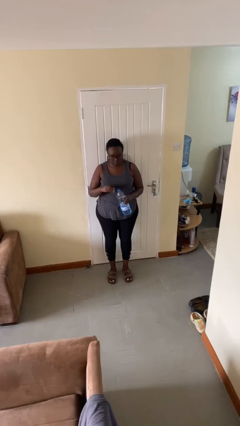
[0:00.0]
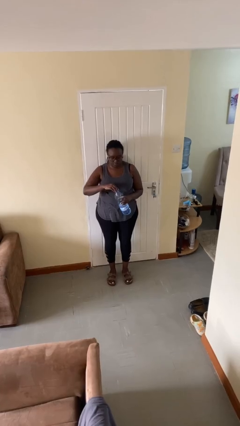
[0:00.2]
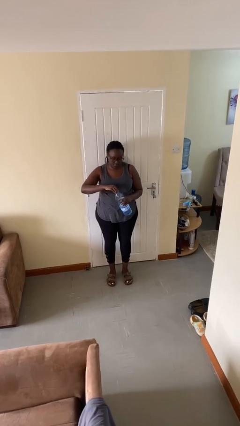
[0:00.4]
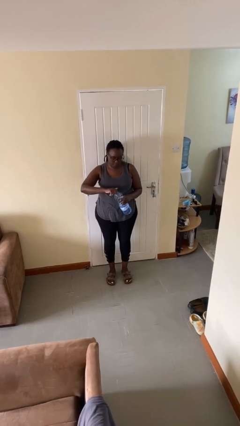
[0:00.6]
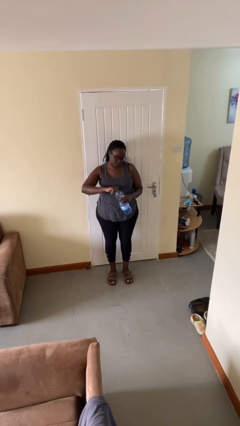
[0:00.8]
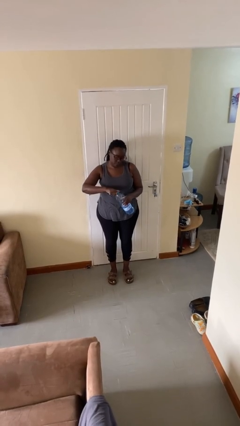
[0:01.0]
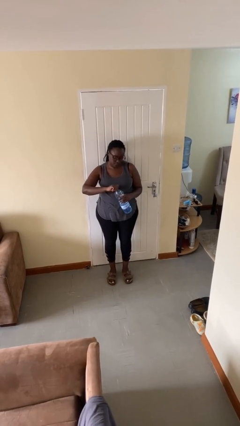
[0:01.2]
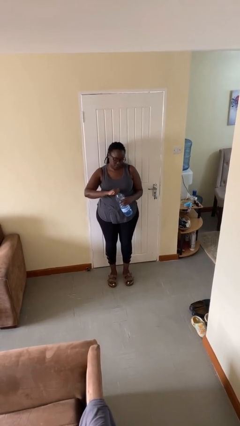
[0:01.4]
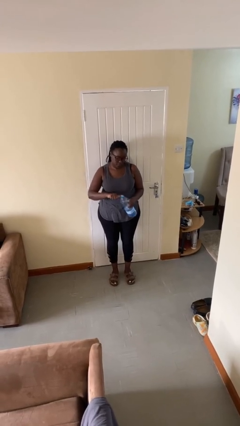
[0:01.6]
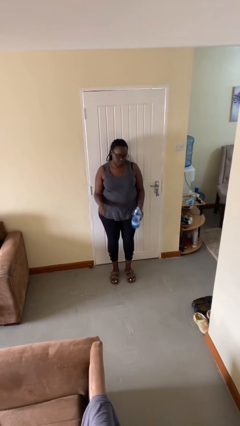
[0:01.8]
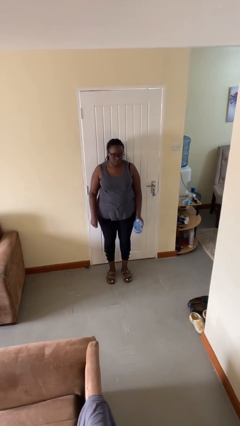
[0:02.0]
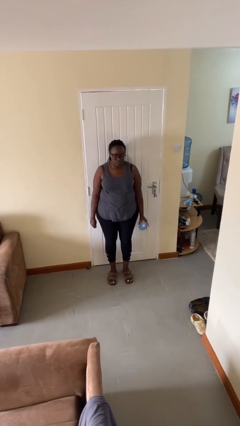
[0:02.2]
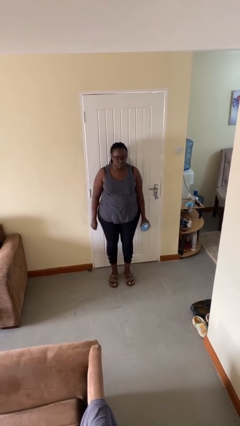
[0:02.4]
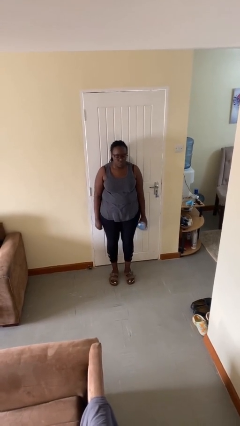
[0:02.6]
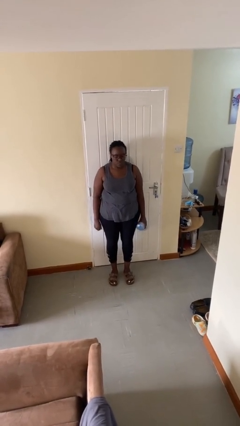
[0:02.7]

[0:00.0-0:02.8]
person screws lid to bottle

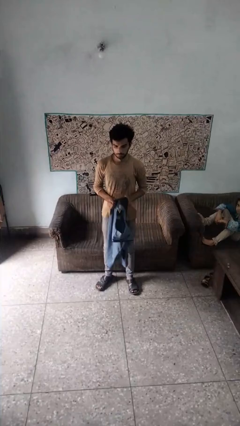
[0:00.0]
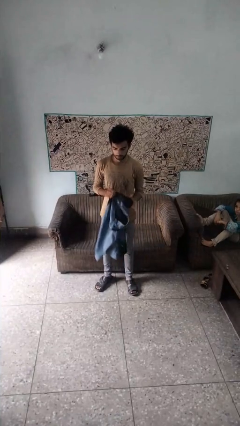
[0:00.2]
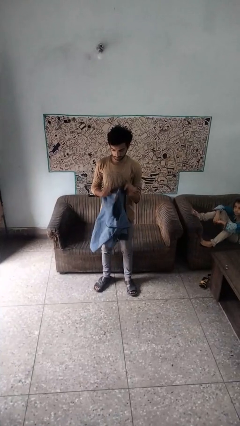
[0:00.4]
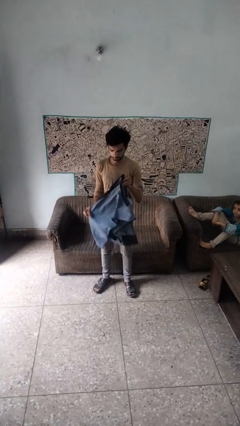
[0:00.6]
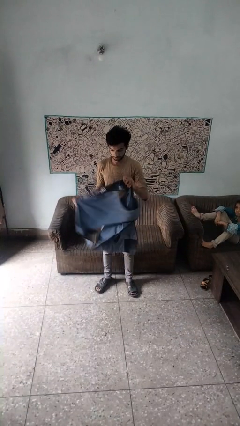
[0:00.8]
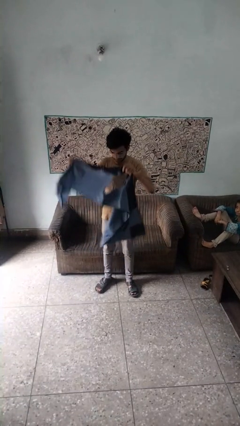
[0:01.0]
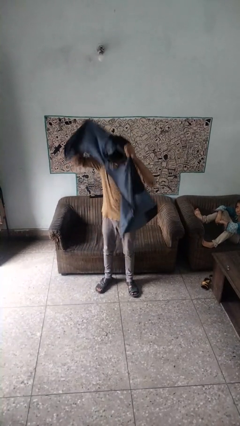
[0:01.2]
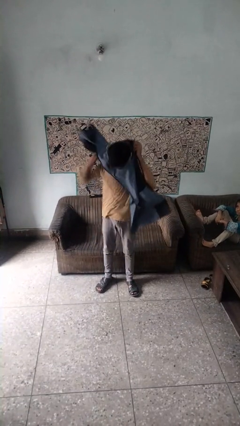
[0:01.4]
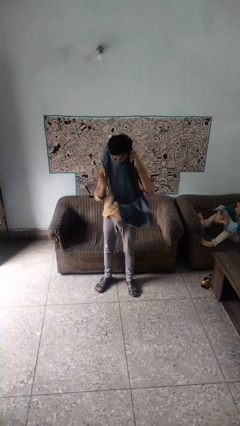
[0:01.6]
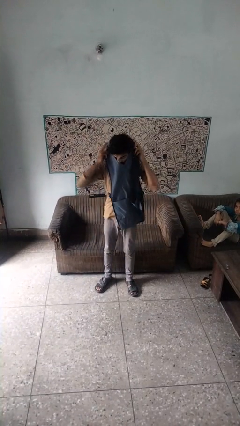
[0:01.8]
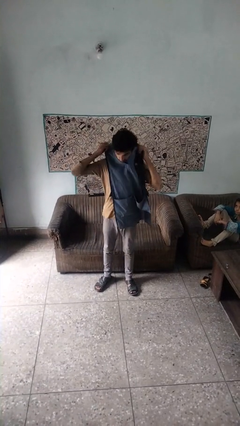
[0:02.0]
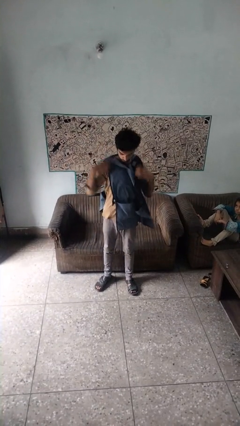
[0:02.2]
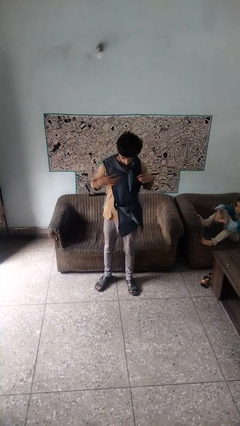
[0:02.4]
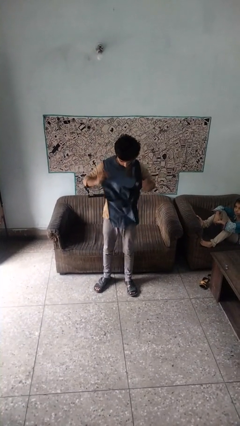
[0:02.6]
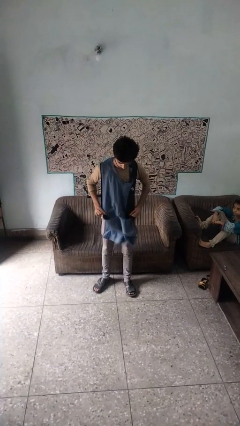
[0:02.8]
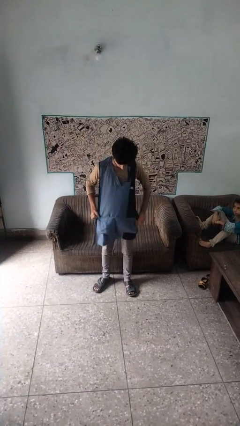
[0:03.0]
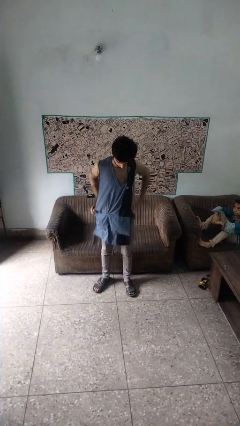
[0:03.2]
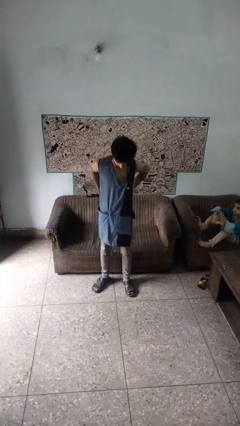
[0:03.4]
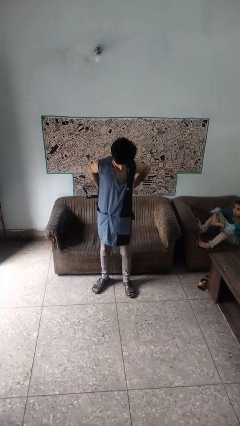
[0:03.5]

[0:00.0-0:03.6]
person puts on apron

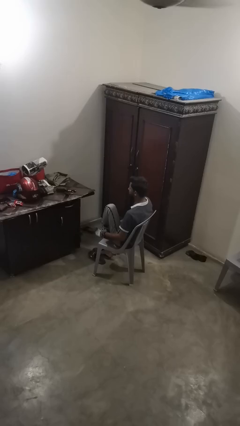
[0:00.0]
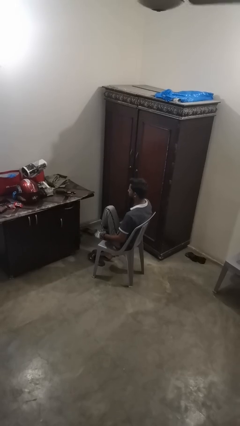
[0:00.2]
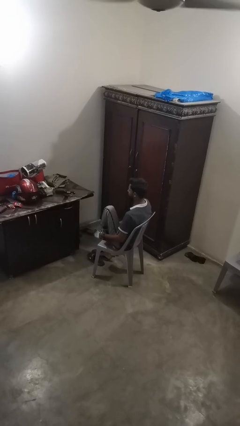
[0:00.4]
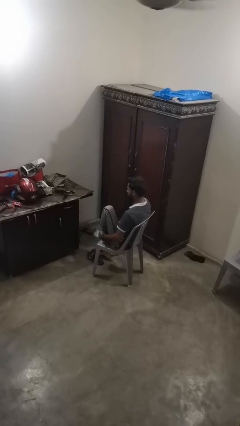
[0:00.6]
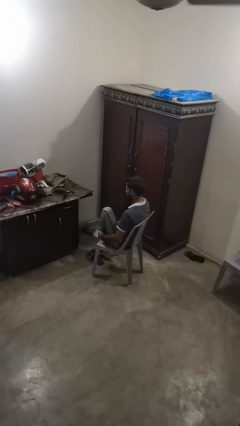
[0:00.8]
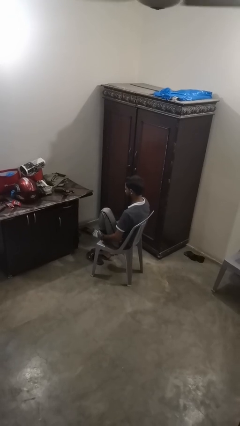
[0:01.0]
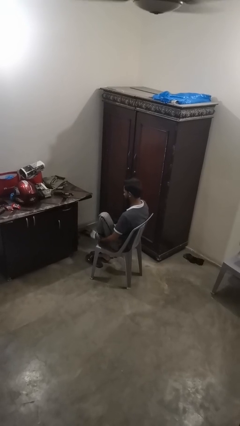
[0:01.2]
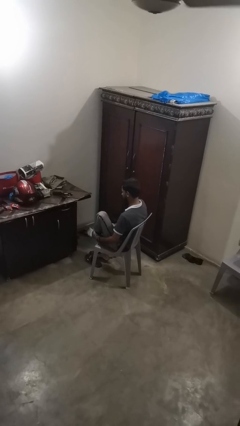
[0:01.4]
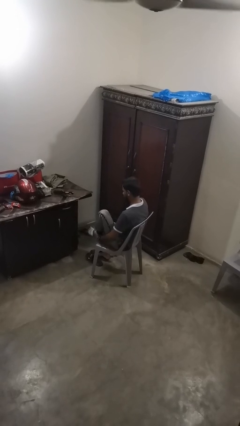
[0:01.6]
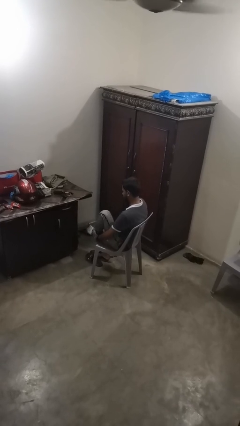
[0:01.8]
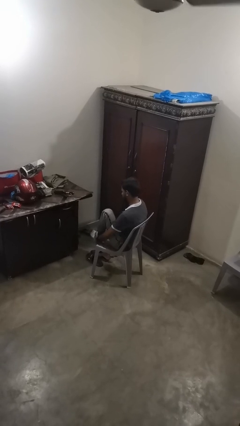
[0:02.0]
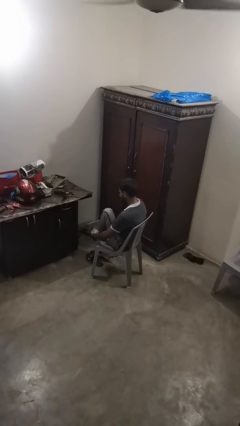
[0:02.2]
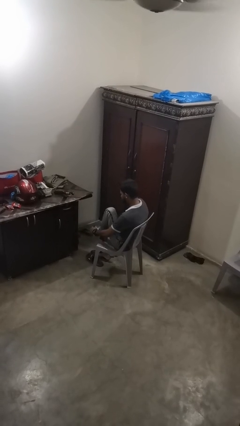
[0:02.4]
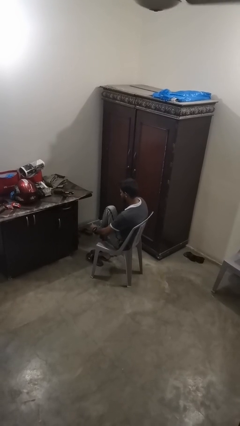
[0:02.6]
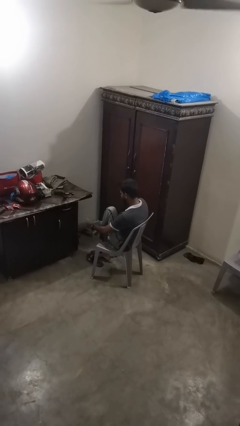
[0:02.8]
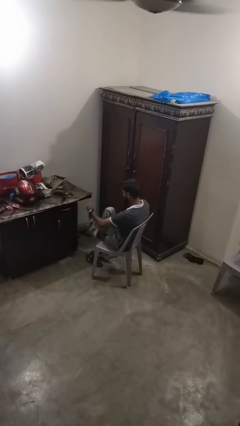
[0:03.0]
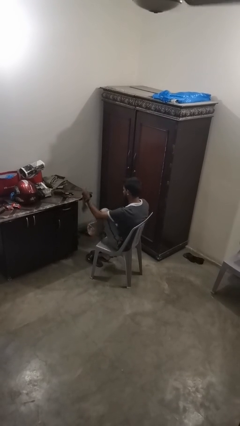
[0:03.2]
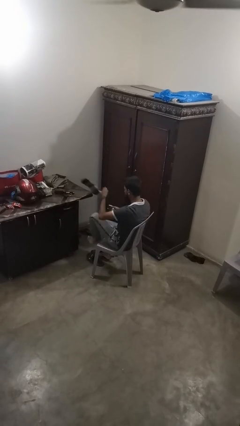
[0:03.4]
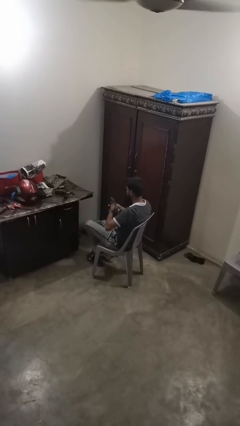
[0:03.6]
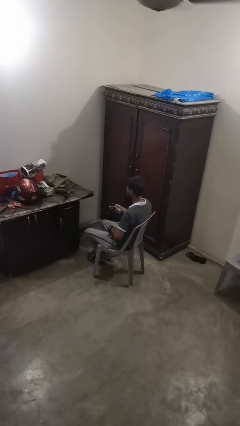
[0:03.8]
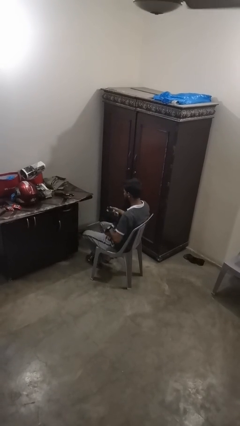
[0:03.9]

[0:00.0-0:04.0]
person takes off socks

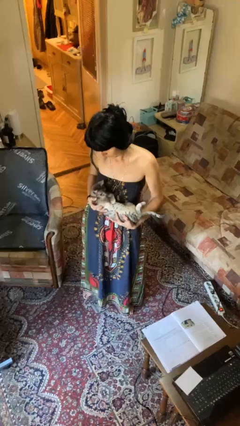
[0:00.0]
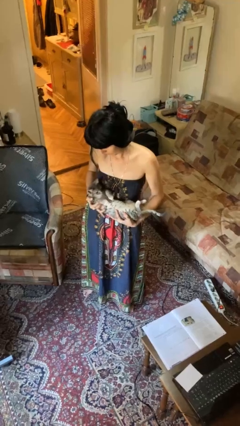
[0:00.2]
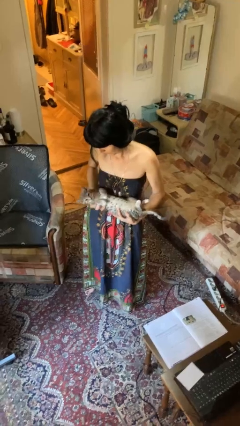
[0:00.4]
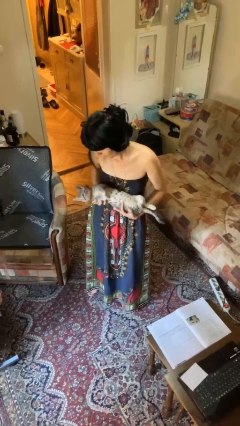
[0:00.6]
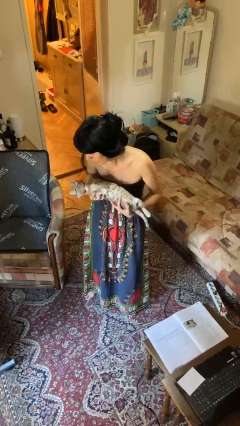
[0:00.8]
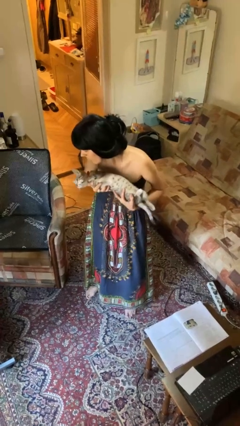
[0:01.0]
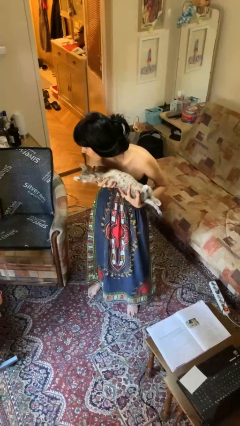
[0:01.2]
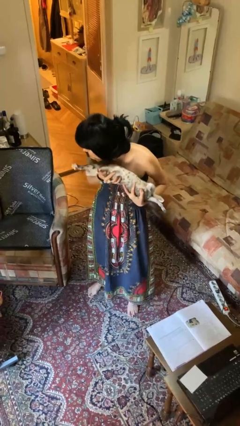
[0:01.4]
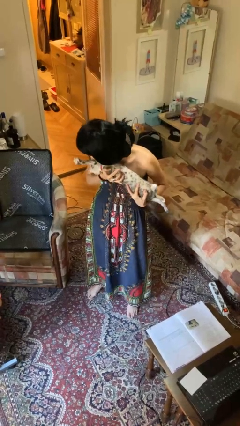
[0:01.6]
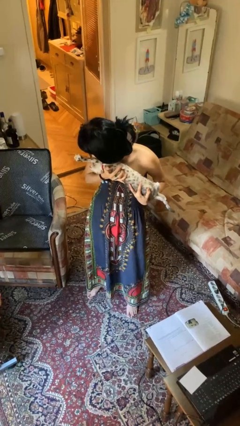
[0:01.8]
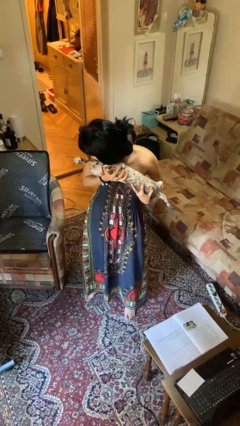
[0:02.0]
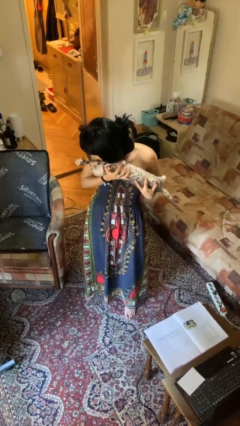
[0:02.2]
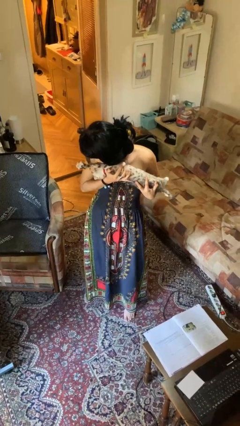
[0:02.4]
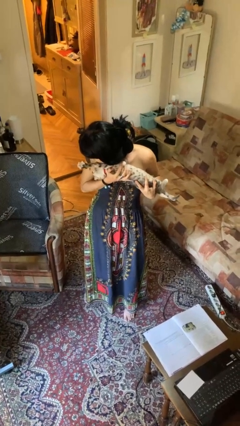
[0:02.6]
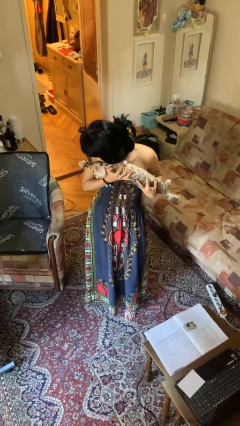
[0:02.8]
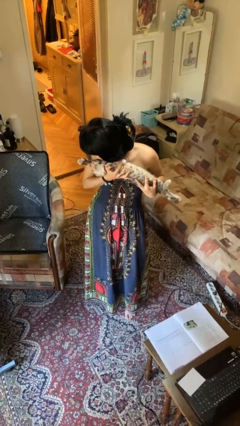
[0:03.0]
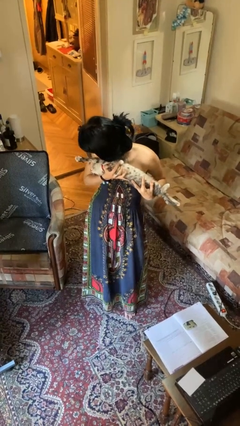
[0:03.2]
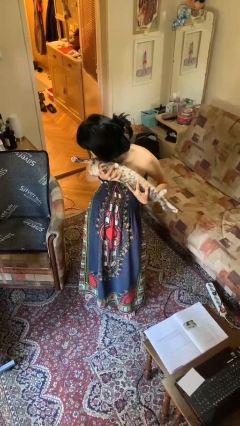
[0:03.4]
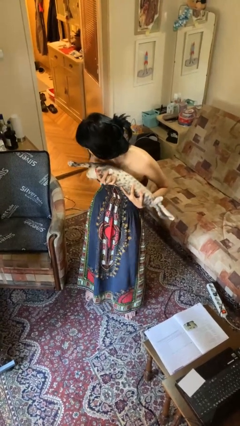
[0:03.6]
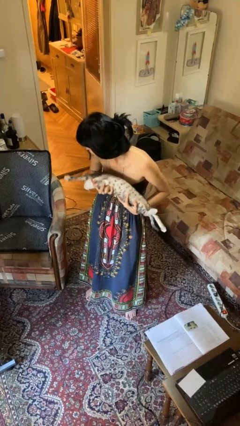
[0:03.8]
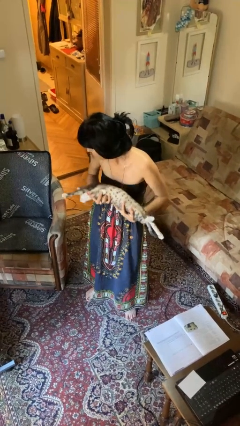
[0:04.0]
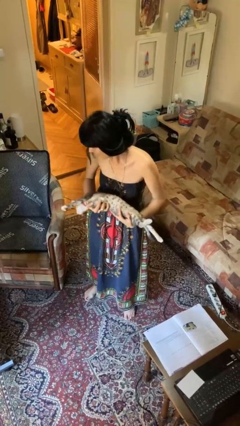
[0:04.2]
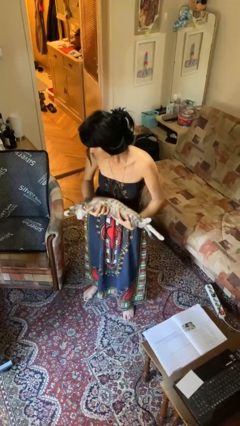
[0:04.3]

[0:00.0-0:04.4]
person hugs cat

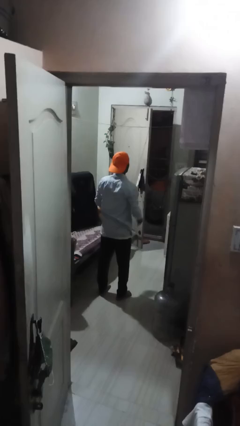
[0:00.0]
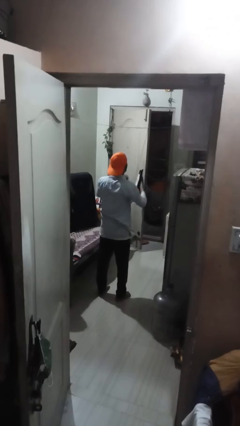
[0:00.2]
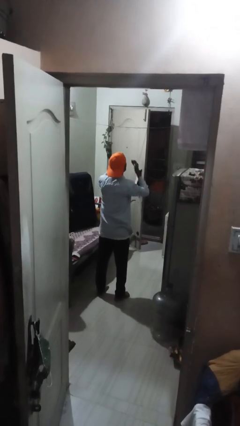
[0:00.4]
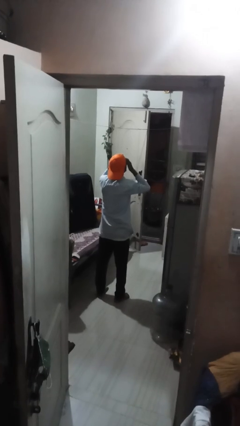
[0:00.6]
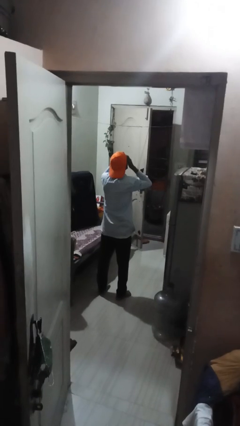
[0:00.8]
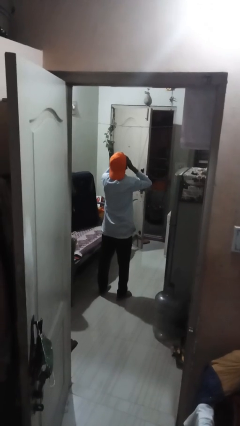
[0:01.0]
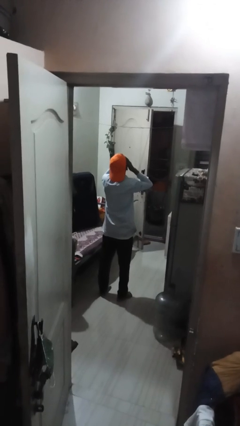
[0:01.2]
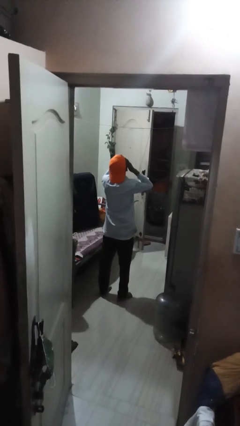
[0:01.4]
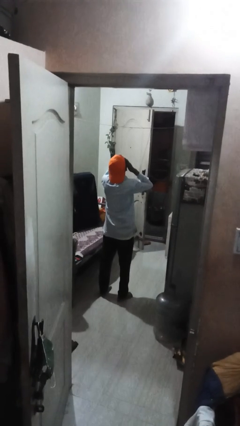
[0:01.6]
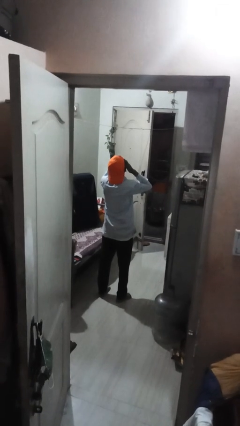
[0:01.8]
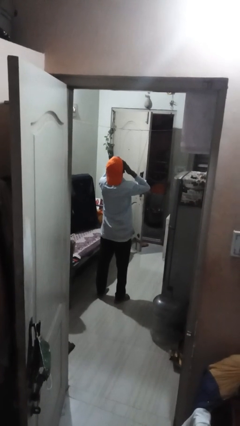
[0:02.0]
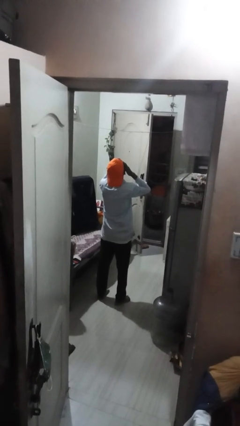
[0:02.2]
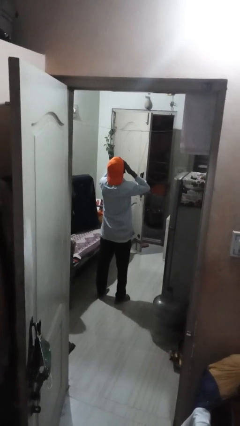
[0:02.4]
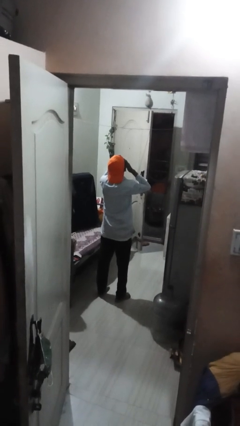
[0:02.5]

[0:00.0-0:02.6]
person covers face with hands

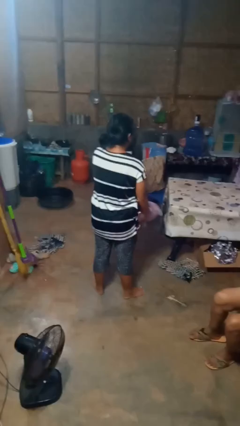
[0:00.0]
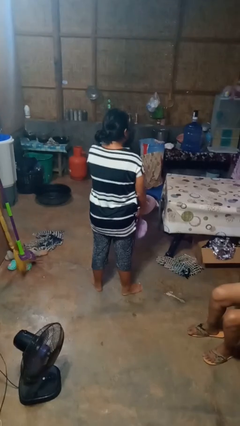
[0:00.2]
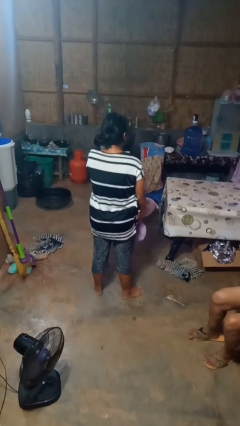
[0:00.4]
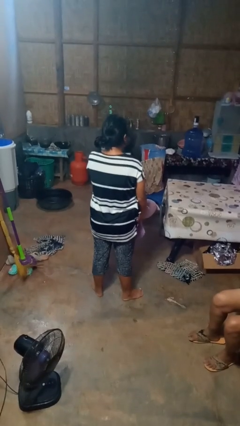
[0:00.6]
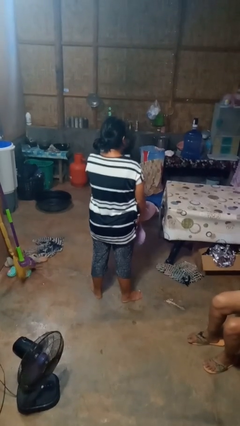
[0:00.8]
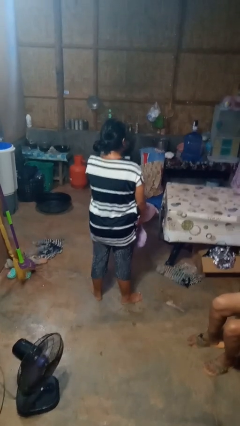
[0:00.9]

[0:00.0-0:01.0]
person catches dropped object
